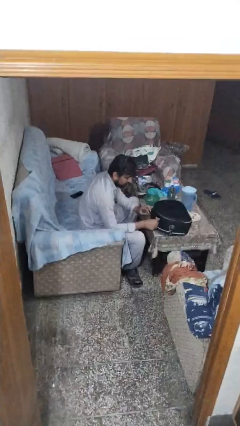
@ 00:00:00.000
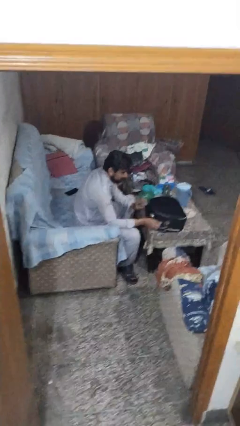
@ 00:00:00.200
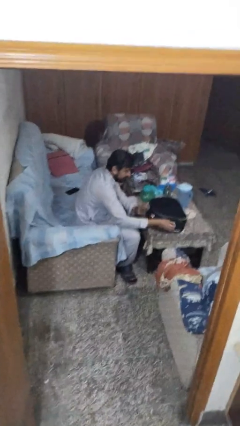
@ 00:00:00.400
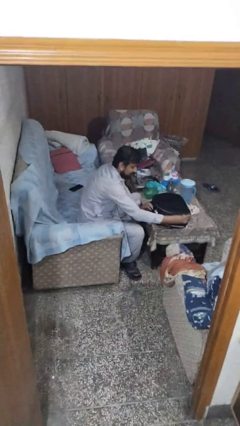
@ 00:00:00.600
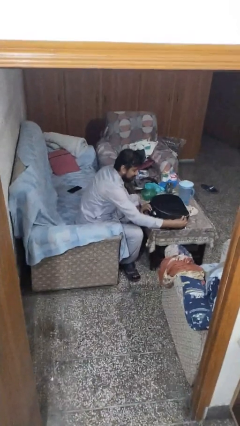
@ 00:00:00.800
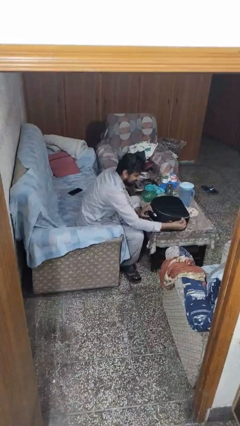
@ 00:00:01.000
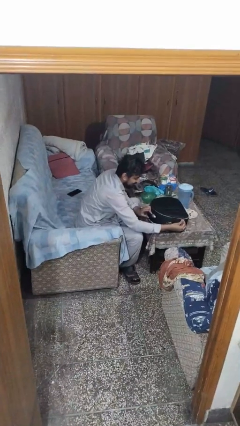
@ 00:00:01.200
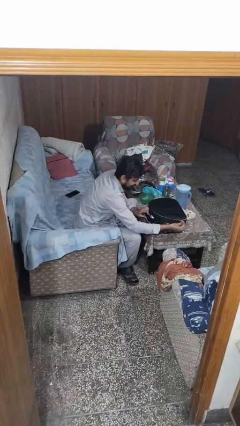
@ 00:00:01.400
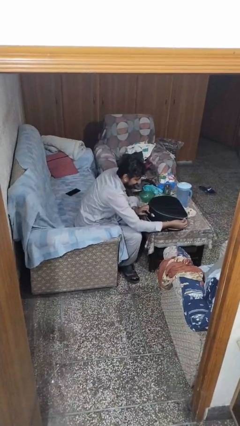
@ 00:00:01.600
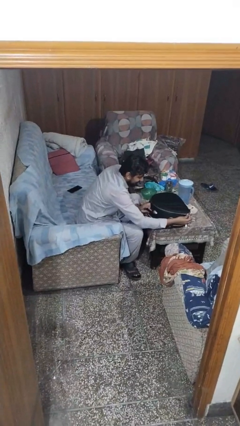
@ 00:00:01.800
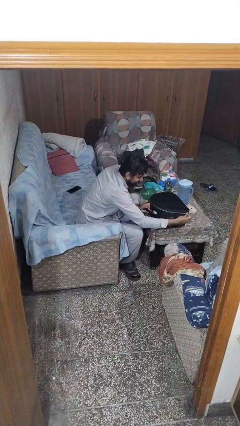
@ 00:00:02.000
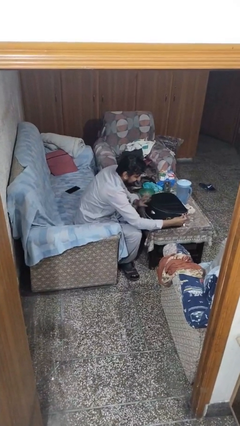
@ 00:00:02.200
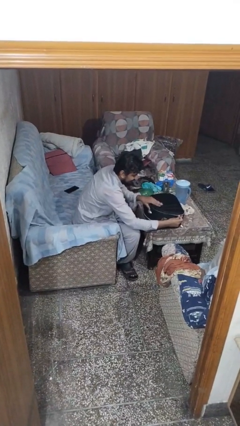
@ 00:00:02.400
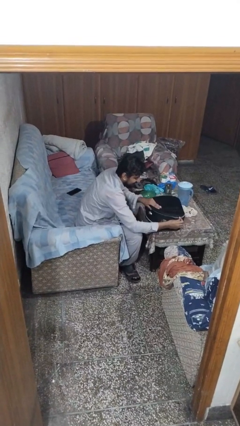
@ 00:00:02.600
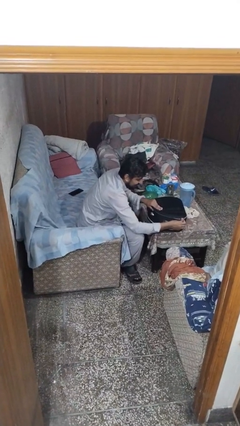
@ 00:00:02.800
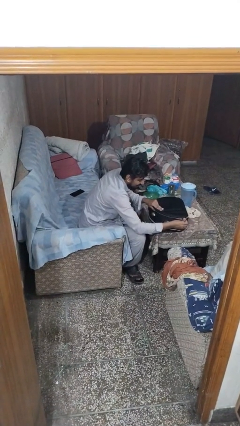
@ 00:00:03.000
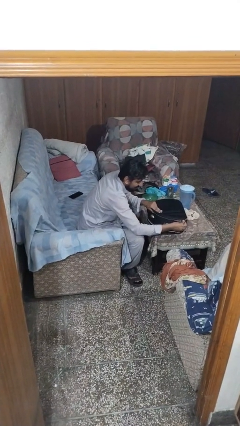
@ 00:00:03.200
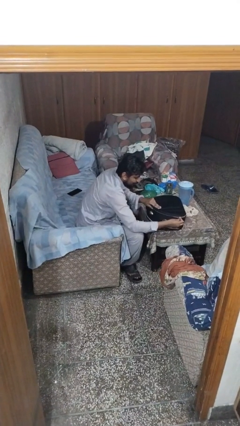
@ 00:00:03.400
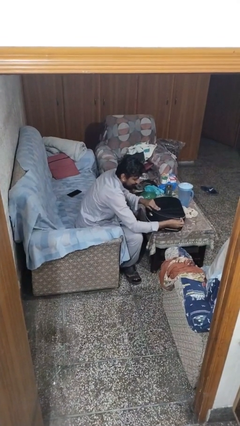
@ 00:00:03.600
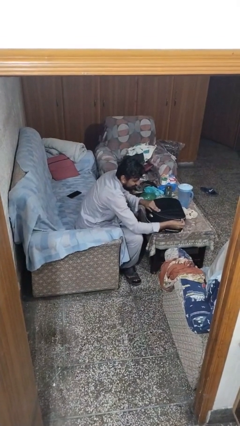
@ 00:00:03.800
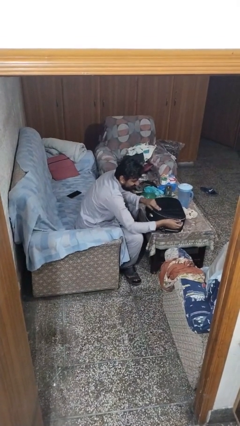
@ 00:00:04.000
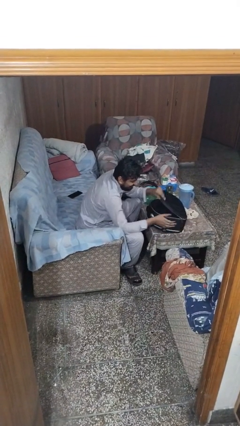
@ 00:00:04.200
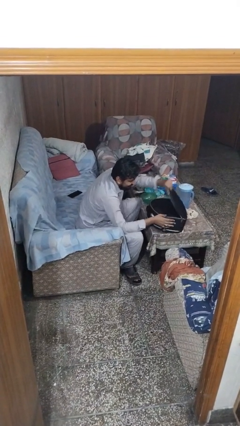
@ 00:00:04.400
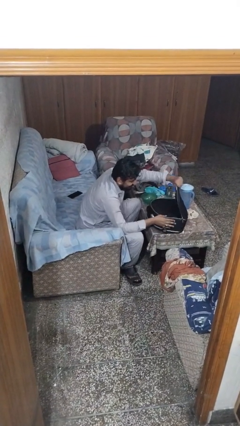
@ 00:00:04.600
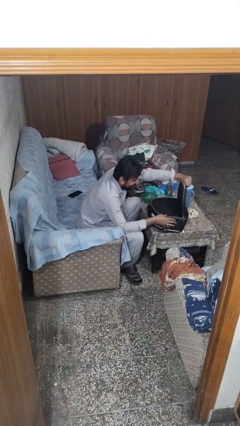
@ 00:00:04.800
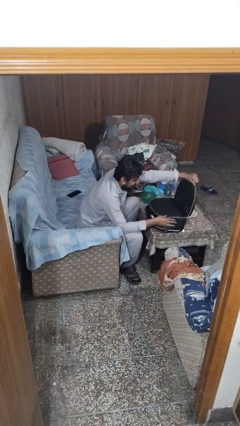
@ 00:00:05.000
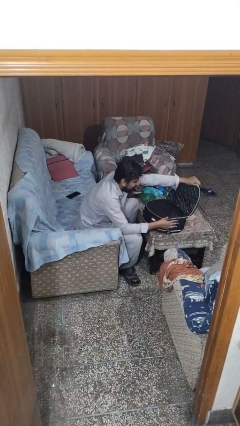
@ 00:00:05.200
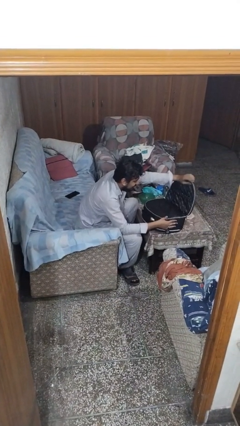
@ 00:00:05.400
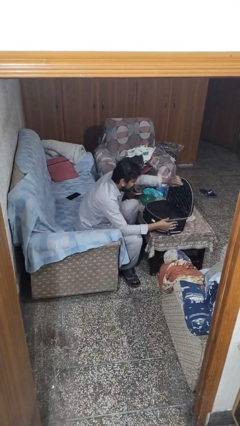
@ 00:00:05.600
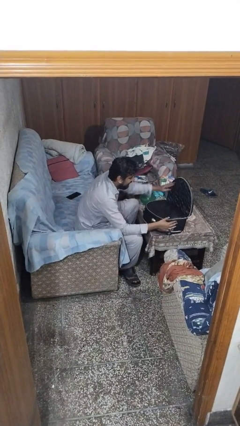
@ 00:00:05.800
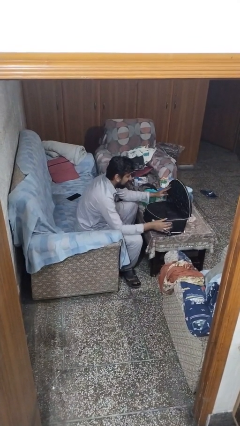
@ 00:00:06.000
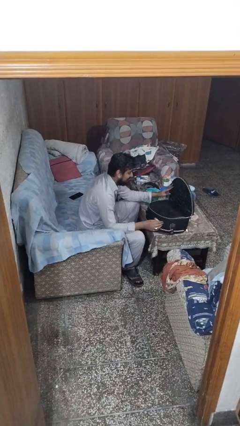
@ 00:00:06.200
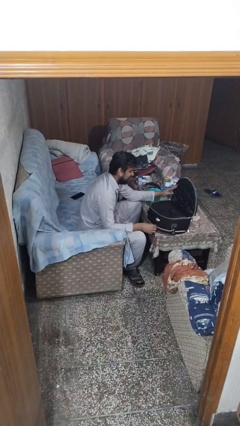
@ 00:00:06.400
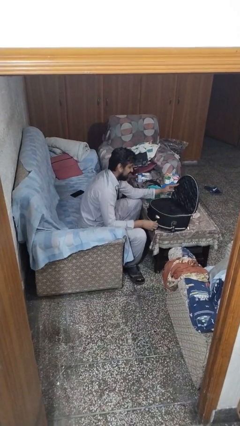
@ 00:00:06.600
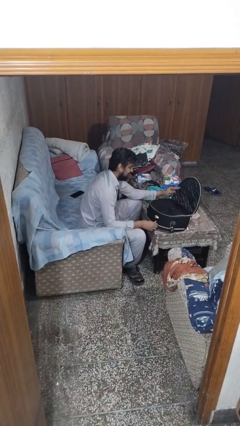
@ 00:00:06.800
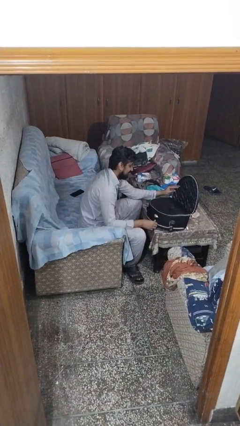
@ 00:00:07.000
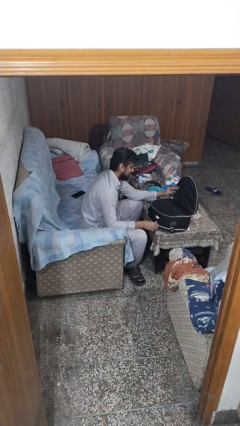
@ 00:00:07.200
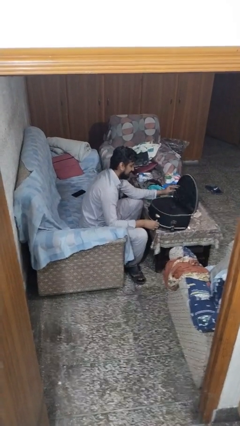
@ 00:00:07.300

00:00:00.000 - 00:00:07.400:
person opens suitcase

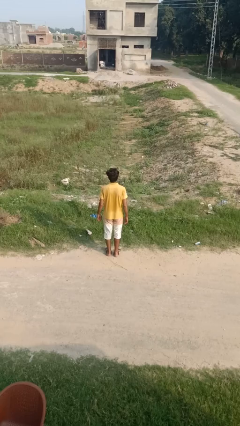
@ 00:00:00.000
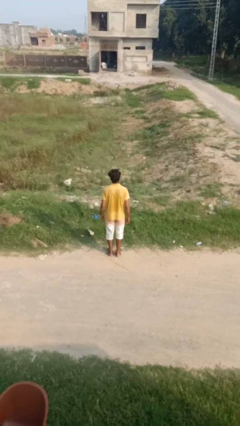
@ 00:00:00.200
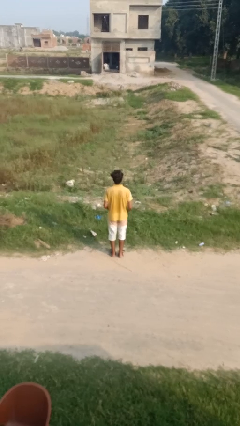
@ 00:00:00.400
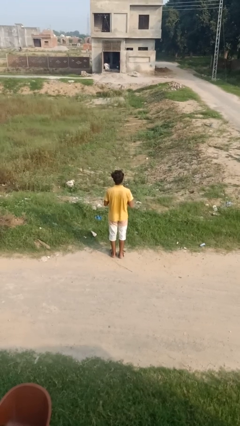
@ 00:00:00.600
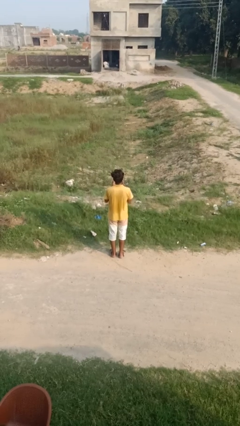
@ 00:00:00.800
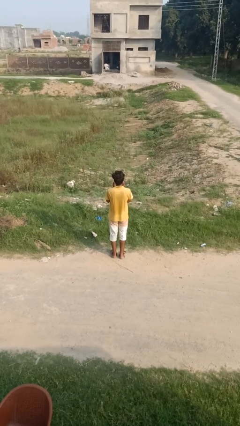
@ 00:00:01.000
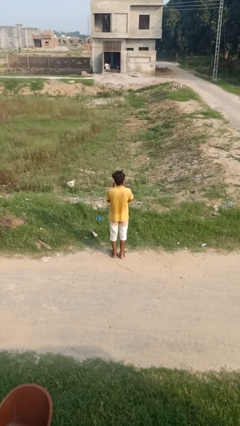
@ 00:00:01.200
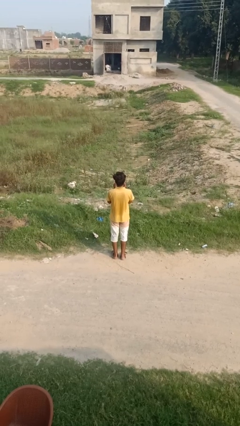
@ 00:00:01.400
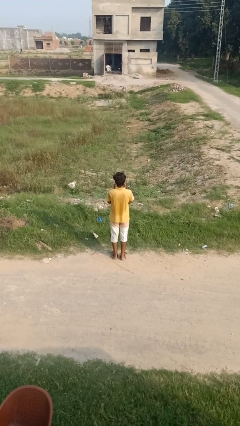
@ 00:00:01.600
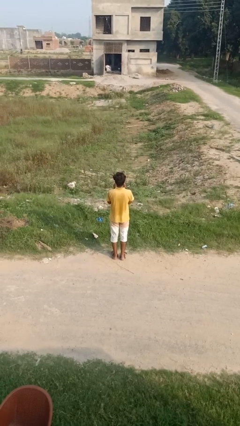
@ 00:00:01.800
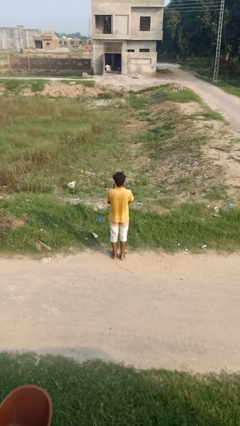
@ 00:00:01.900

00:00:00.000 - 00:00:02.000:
person prays

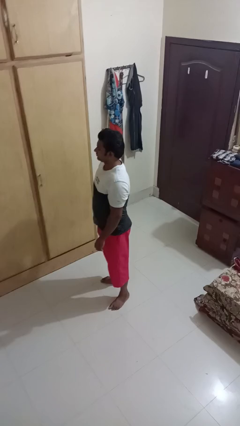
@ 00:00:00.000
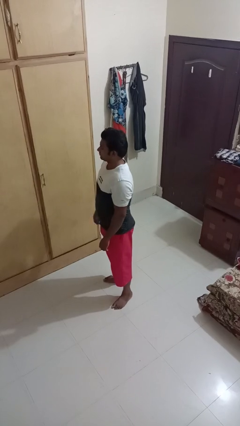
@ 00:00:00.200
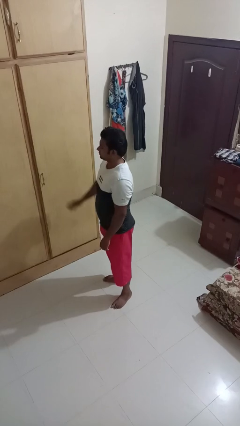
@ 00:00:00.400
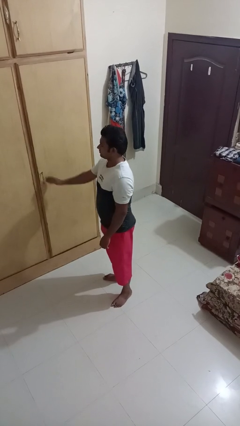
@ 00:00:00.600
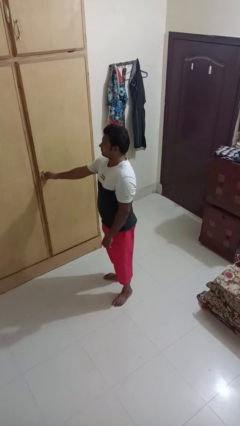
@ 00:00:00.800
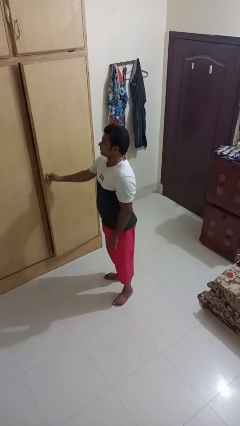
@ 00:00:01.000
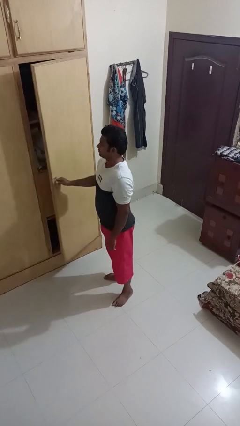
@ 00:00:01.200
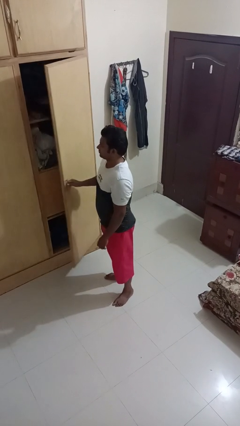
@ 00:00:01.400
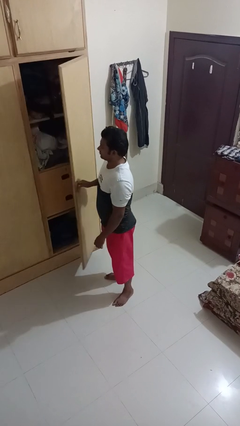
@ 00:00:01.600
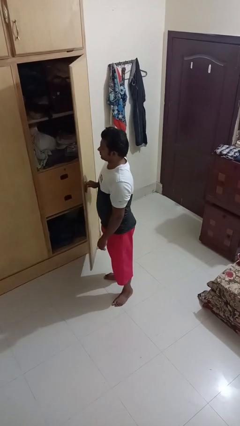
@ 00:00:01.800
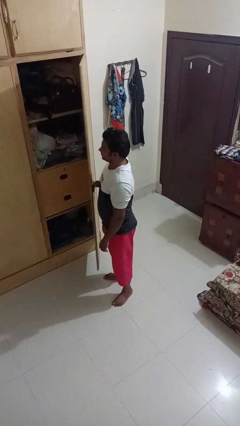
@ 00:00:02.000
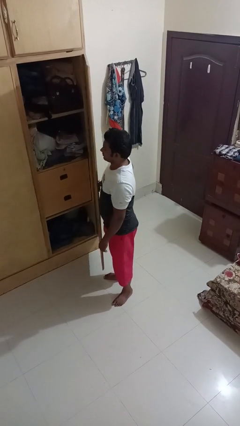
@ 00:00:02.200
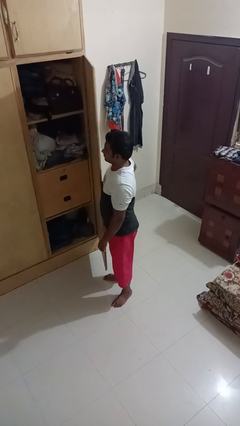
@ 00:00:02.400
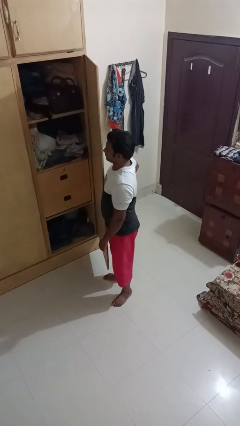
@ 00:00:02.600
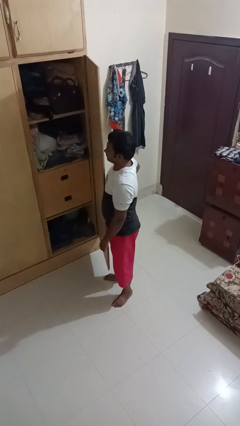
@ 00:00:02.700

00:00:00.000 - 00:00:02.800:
person opens closet door

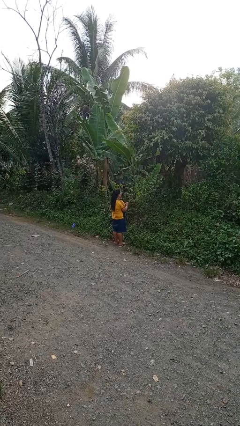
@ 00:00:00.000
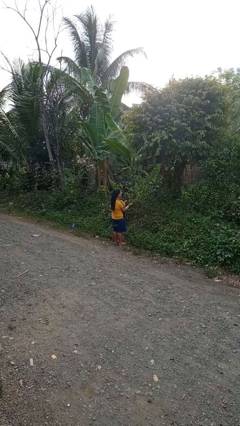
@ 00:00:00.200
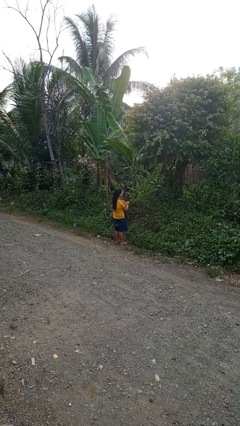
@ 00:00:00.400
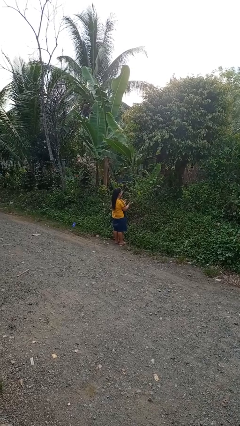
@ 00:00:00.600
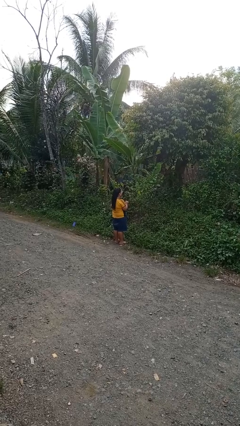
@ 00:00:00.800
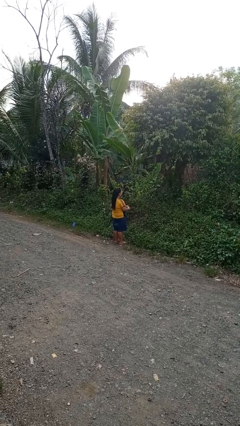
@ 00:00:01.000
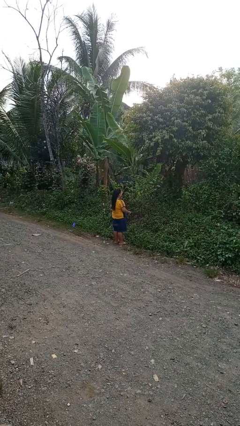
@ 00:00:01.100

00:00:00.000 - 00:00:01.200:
person claps hands

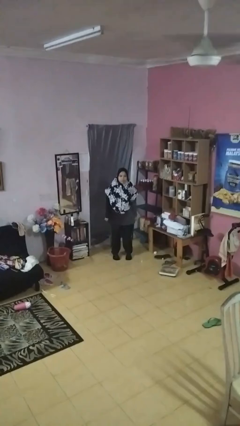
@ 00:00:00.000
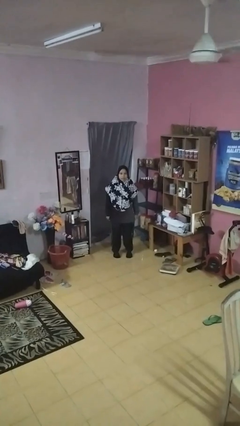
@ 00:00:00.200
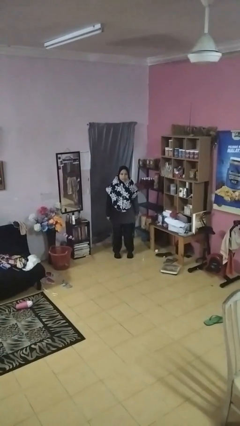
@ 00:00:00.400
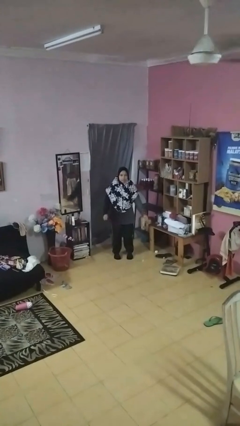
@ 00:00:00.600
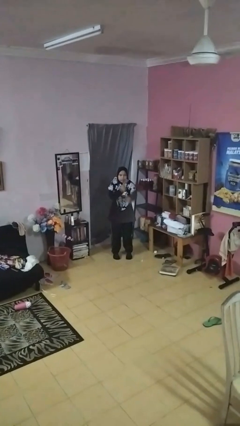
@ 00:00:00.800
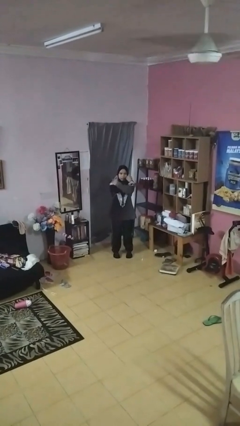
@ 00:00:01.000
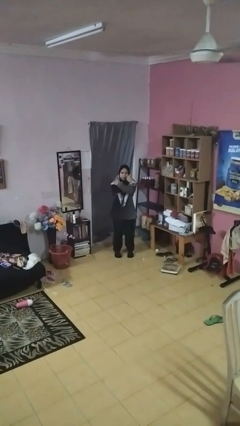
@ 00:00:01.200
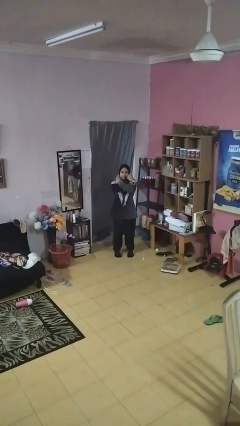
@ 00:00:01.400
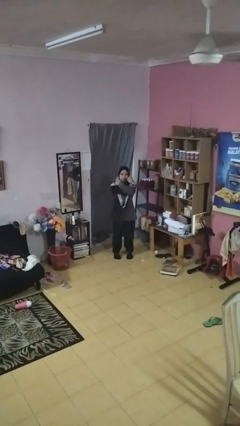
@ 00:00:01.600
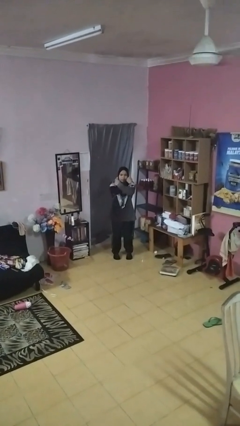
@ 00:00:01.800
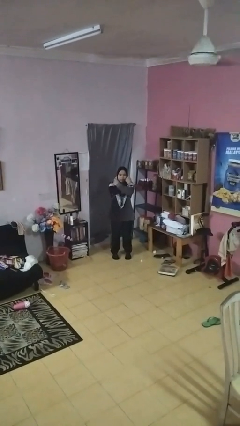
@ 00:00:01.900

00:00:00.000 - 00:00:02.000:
person crosses arms

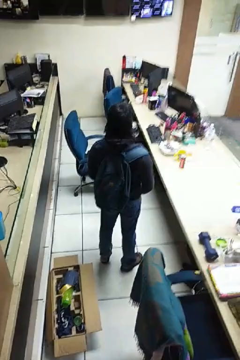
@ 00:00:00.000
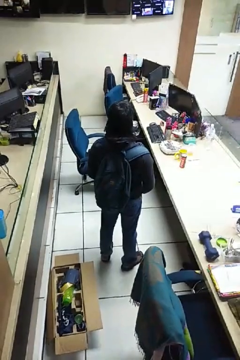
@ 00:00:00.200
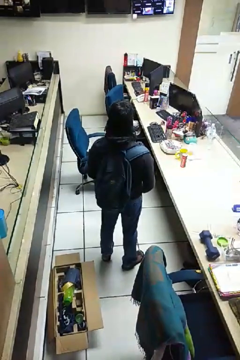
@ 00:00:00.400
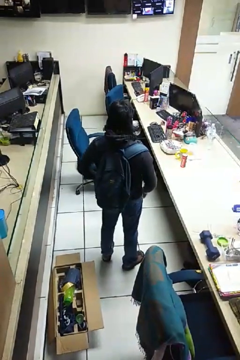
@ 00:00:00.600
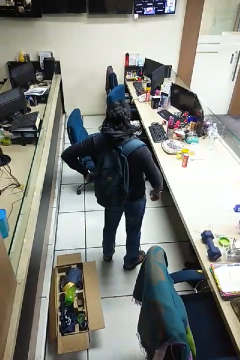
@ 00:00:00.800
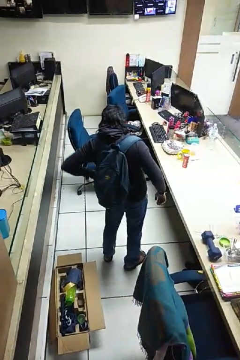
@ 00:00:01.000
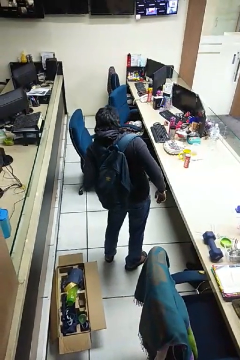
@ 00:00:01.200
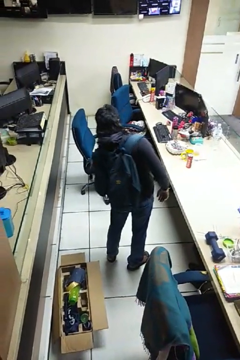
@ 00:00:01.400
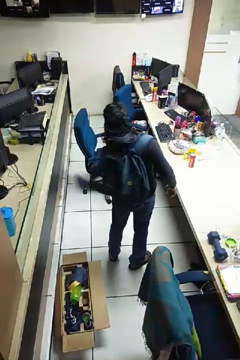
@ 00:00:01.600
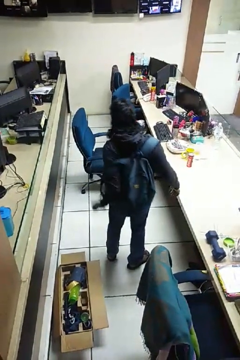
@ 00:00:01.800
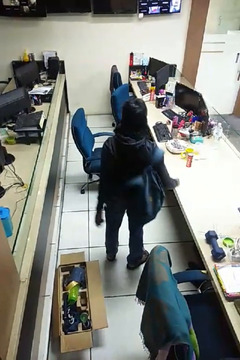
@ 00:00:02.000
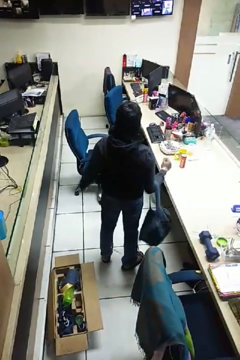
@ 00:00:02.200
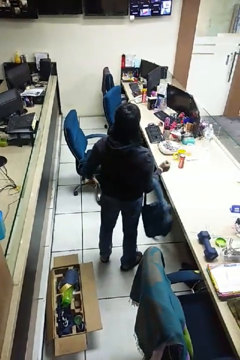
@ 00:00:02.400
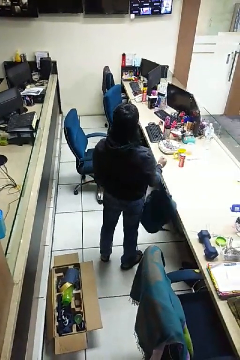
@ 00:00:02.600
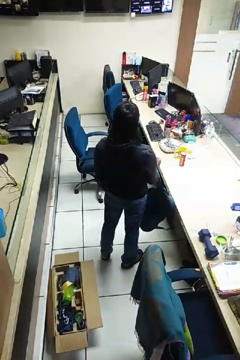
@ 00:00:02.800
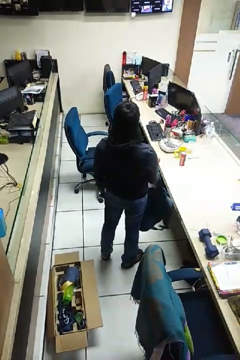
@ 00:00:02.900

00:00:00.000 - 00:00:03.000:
person takes off backpack
